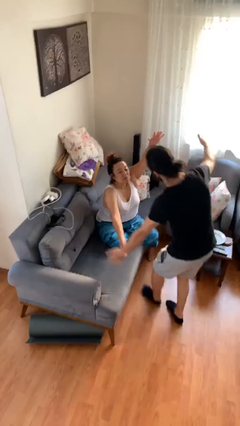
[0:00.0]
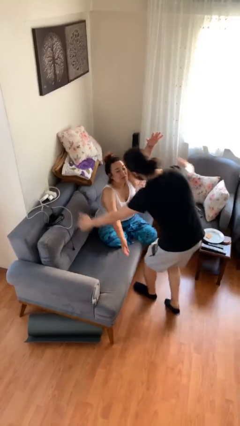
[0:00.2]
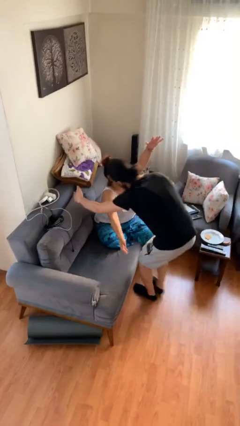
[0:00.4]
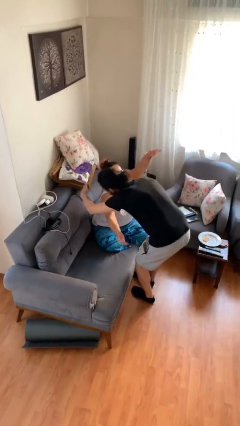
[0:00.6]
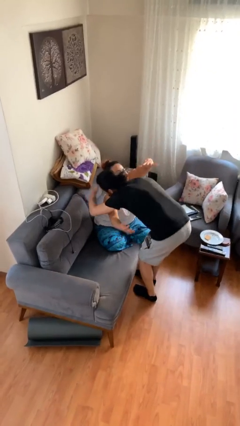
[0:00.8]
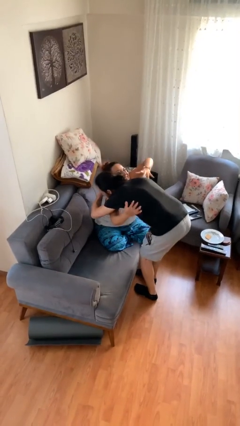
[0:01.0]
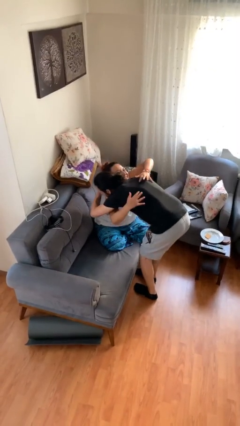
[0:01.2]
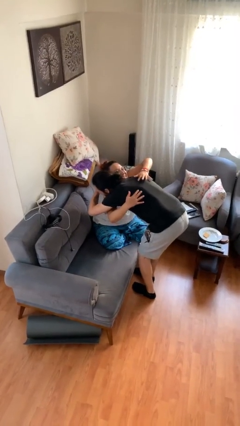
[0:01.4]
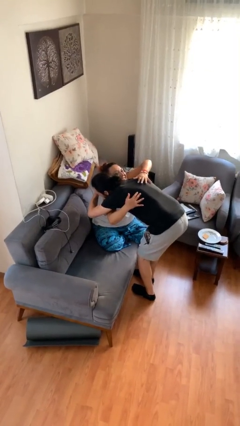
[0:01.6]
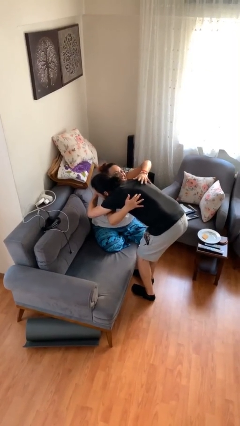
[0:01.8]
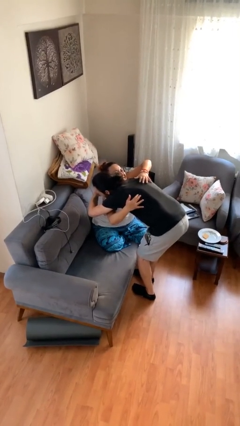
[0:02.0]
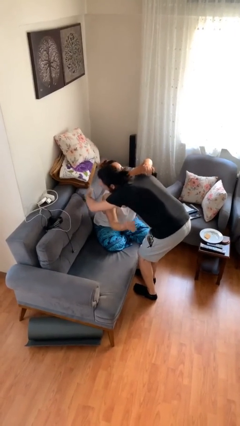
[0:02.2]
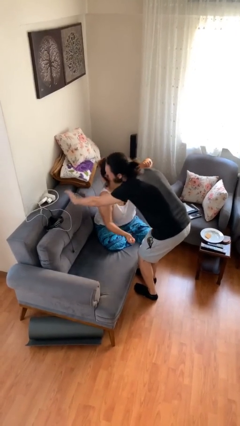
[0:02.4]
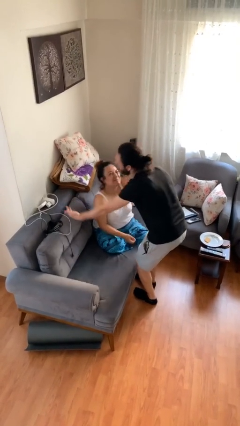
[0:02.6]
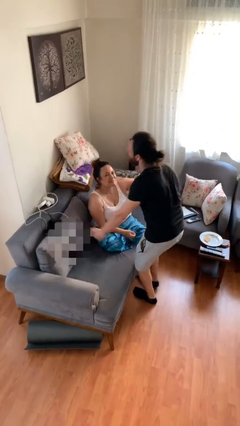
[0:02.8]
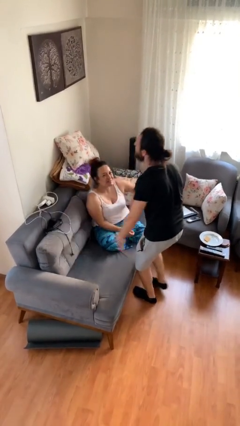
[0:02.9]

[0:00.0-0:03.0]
person embraces person

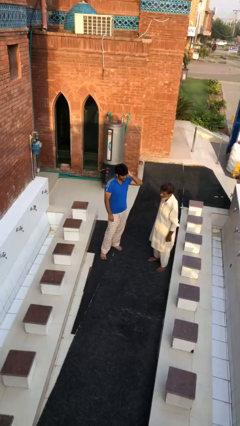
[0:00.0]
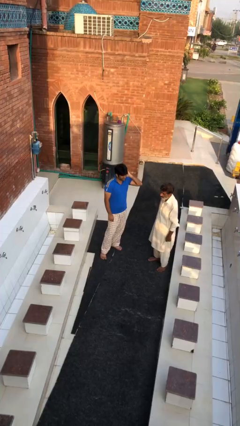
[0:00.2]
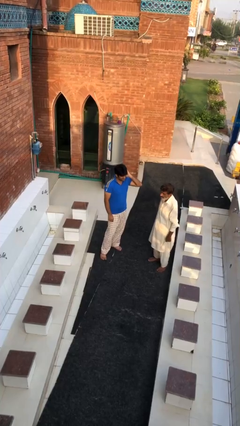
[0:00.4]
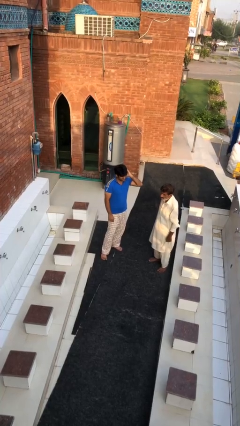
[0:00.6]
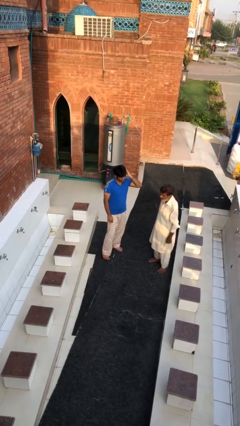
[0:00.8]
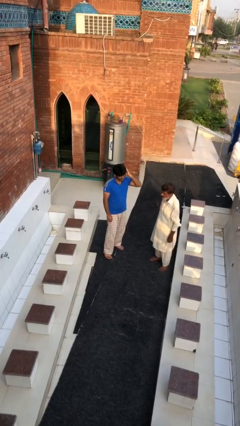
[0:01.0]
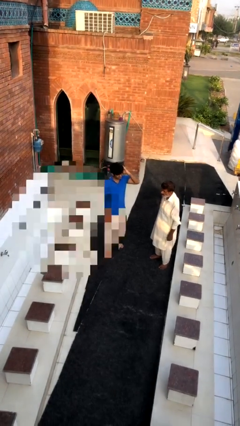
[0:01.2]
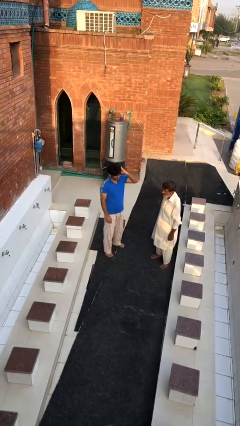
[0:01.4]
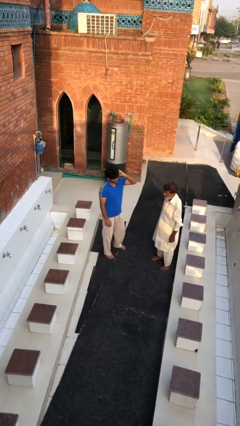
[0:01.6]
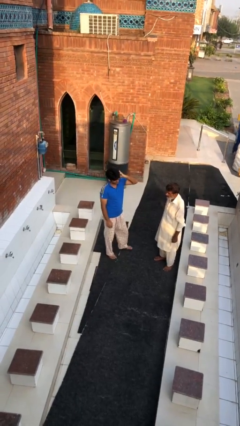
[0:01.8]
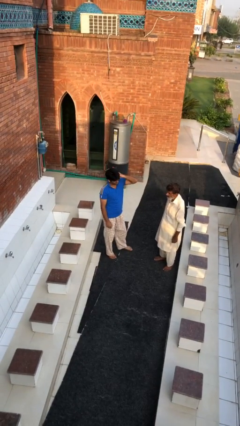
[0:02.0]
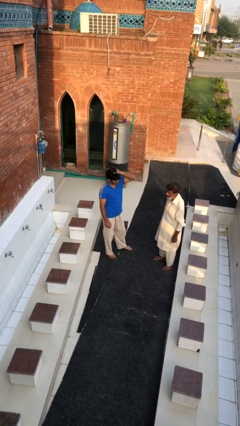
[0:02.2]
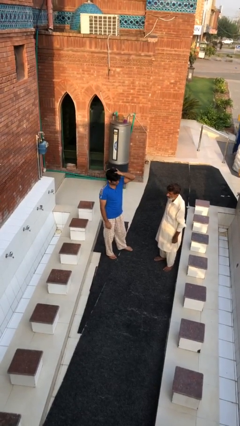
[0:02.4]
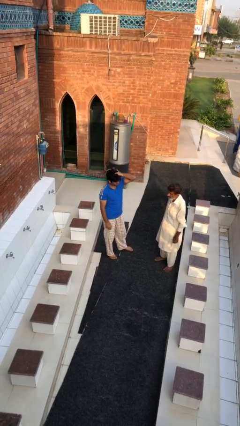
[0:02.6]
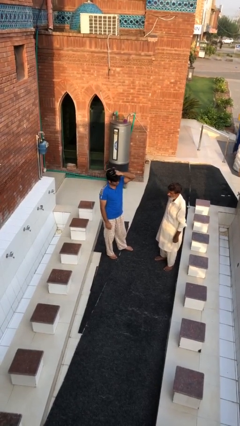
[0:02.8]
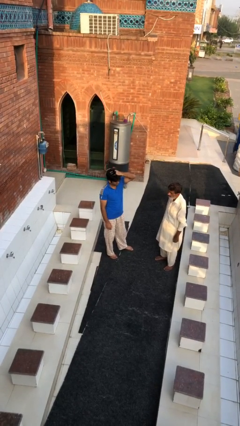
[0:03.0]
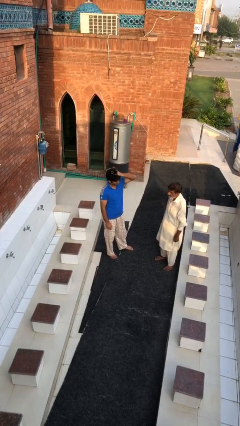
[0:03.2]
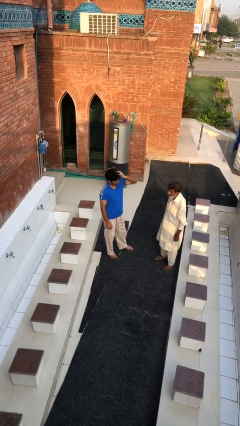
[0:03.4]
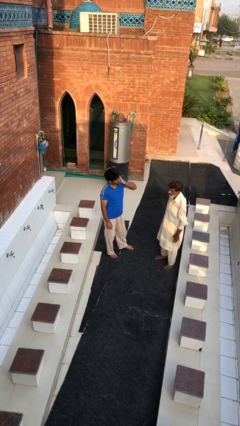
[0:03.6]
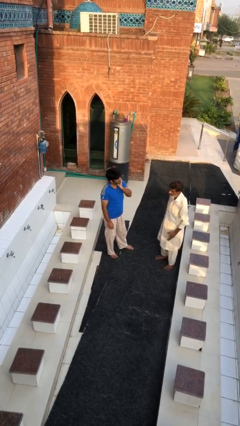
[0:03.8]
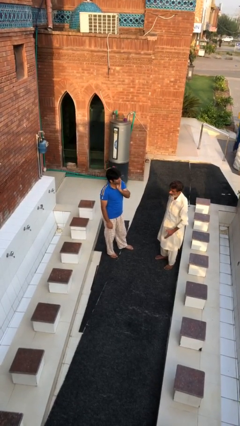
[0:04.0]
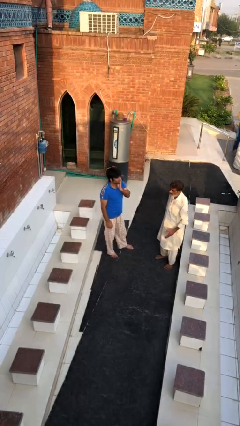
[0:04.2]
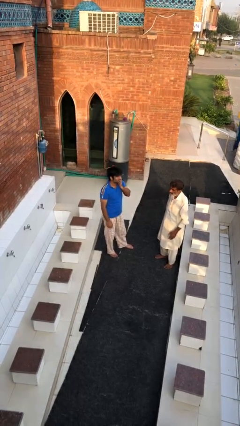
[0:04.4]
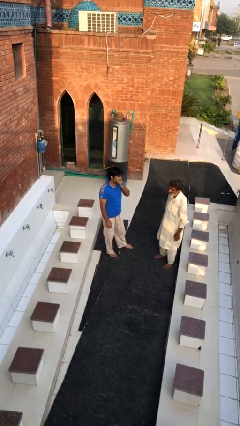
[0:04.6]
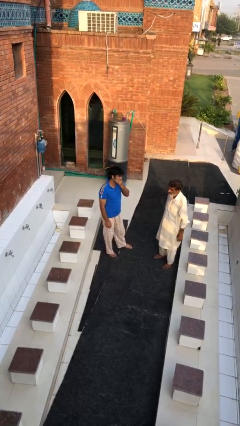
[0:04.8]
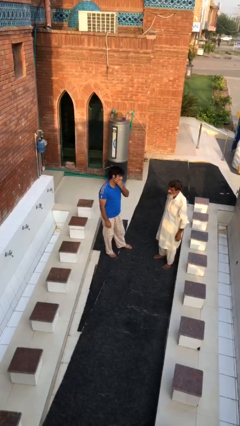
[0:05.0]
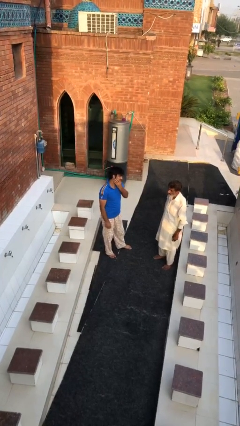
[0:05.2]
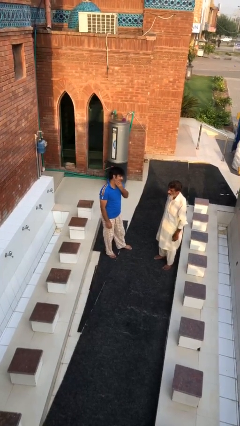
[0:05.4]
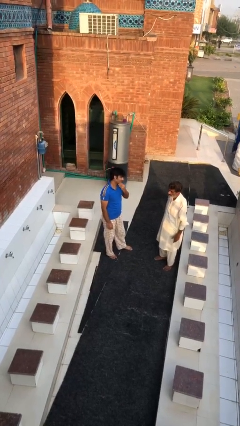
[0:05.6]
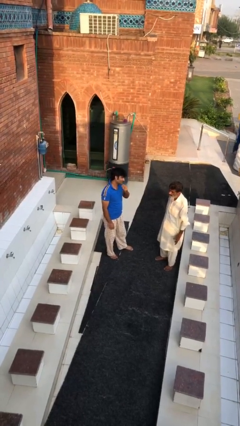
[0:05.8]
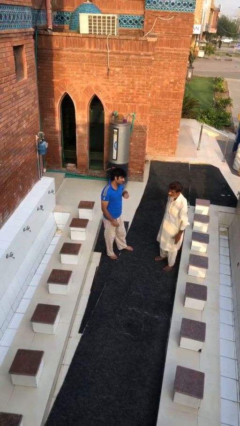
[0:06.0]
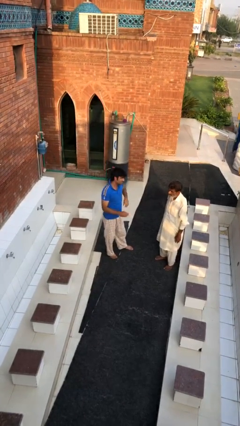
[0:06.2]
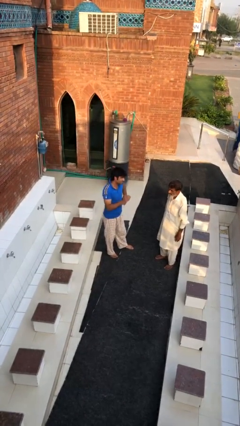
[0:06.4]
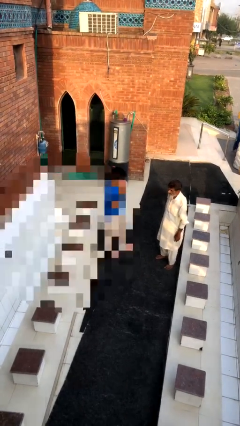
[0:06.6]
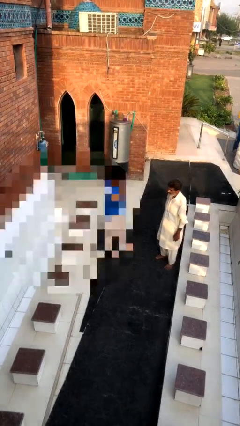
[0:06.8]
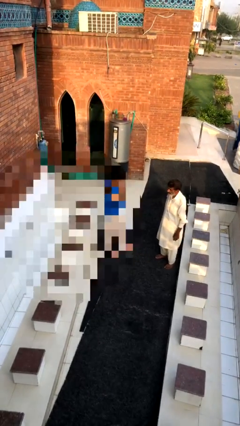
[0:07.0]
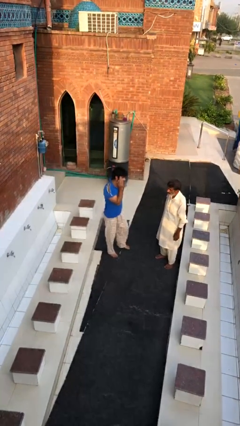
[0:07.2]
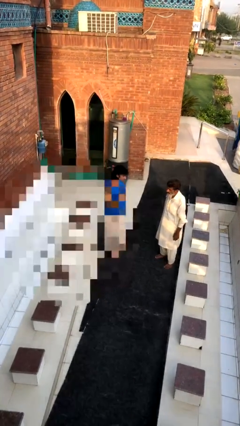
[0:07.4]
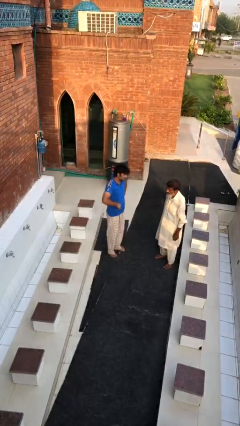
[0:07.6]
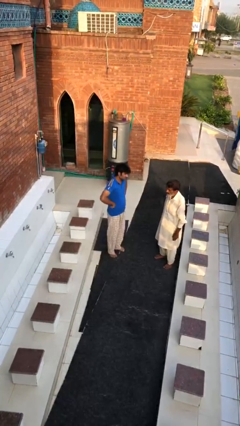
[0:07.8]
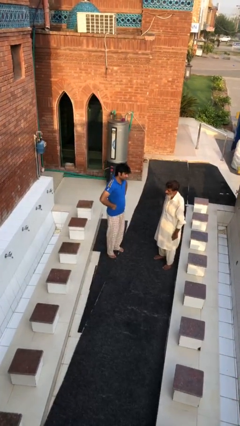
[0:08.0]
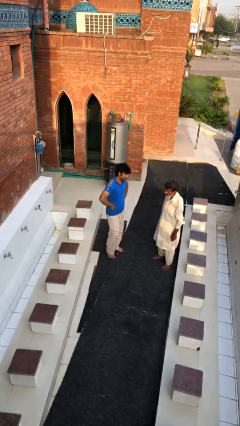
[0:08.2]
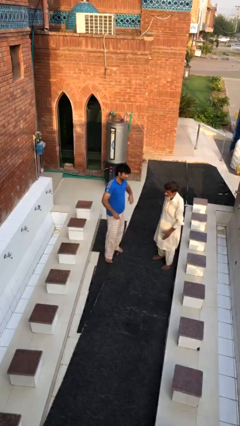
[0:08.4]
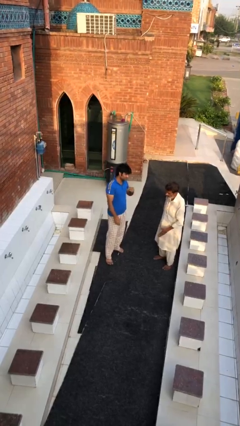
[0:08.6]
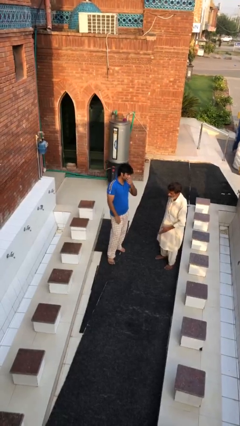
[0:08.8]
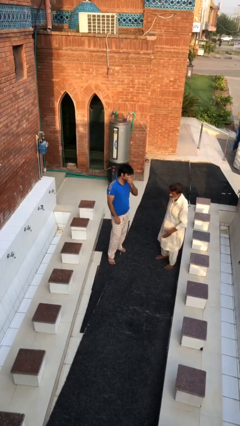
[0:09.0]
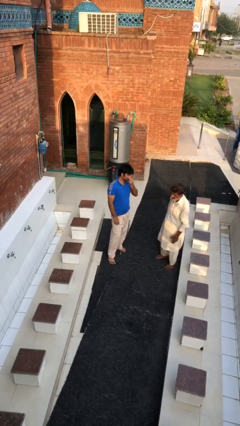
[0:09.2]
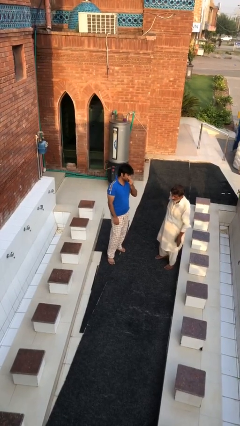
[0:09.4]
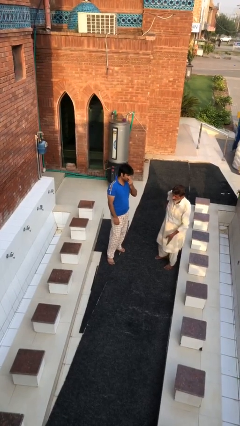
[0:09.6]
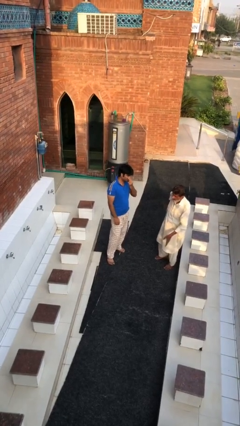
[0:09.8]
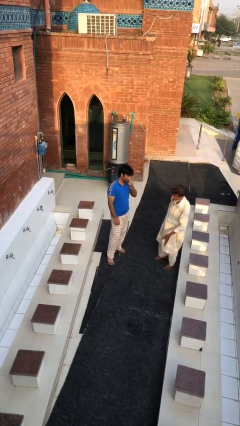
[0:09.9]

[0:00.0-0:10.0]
person talks to person

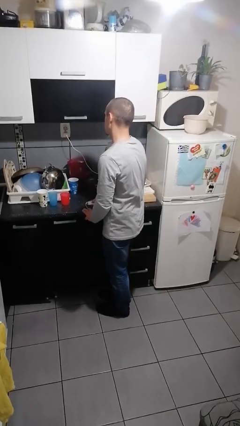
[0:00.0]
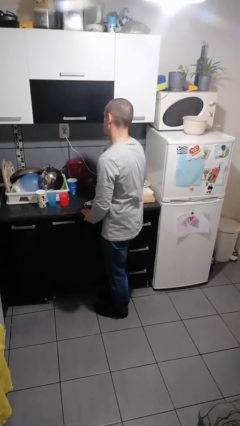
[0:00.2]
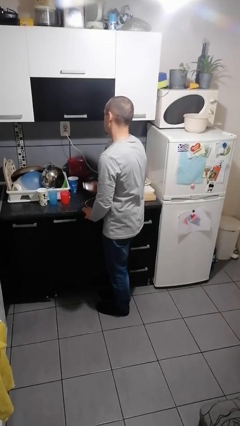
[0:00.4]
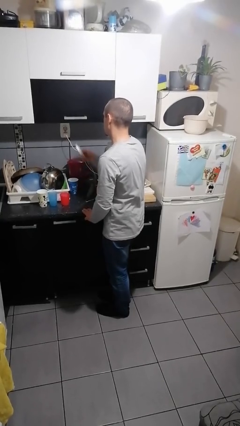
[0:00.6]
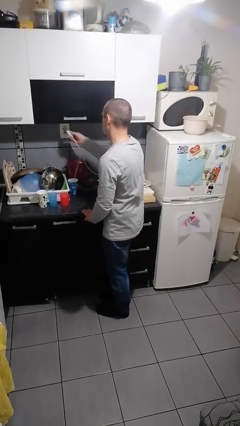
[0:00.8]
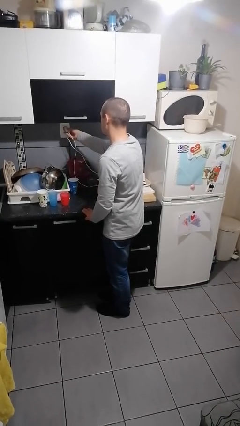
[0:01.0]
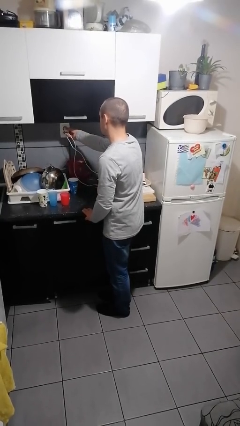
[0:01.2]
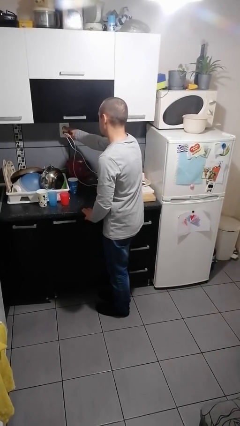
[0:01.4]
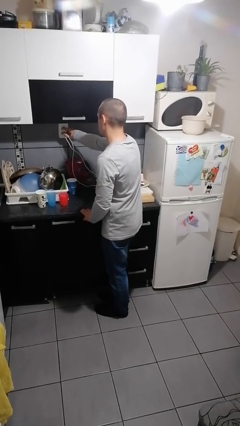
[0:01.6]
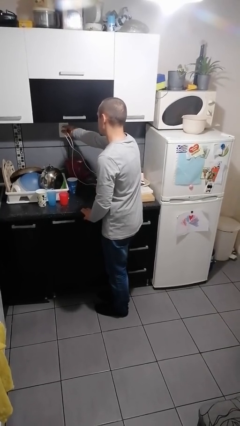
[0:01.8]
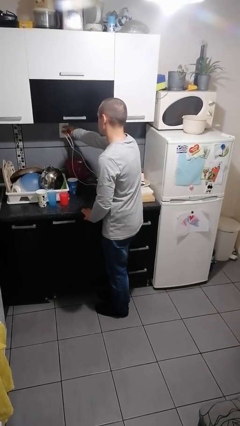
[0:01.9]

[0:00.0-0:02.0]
person plugs into electrical socket

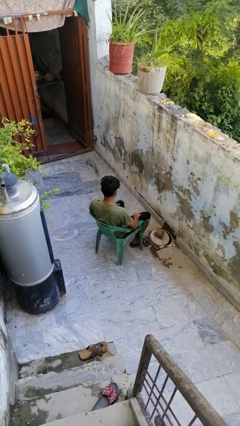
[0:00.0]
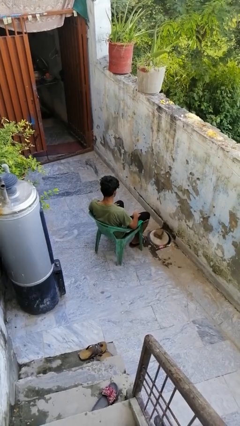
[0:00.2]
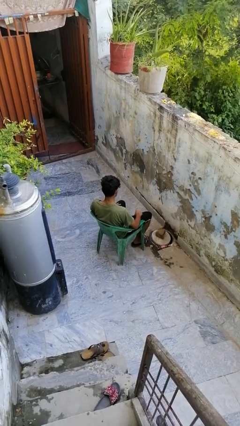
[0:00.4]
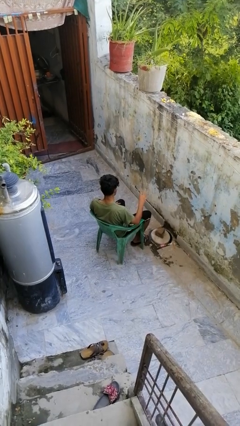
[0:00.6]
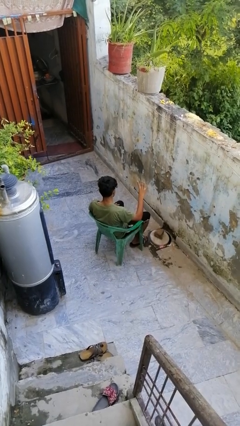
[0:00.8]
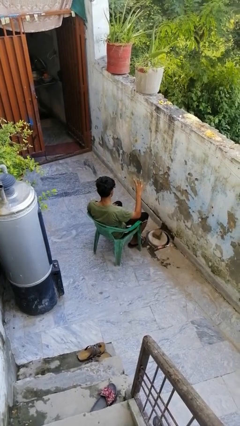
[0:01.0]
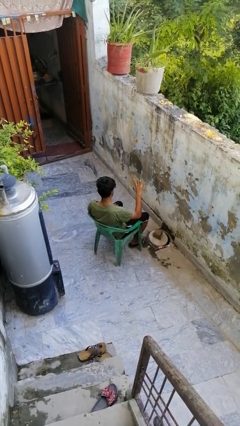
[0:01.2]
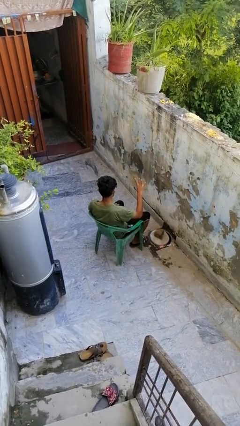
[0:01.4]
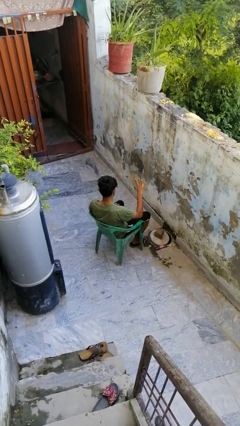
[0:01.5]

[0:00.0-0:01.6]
person gestures number four

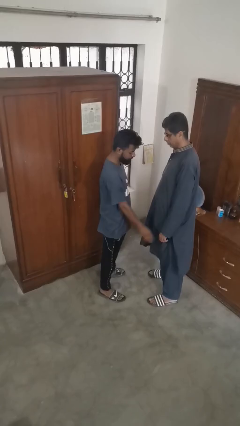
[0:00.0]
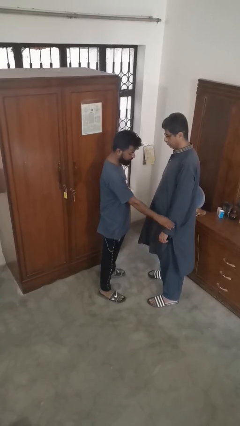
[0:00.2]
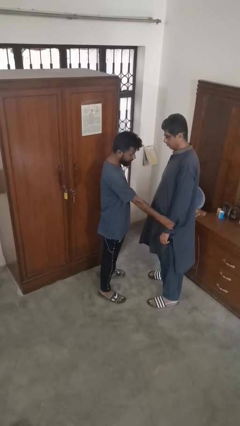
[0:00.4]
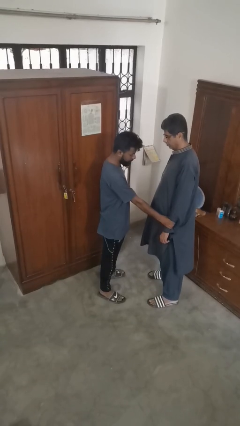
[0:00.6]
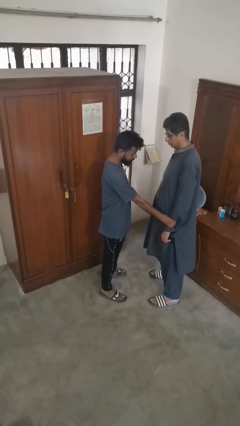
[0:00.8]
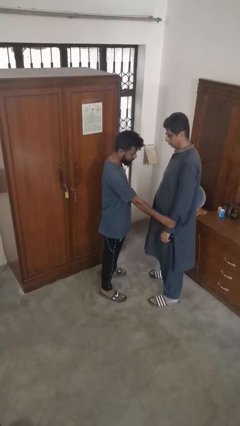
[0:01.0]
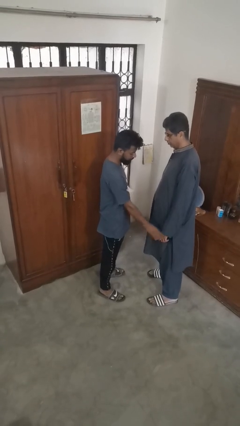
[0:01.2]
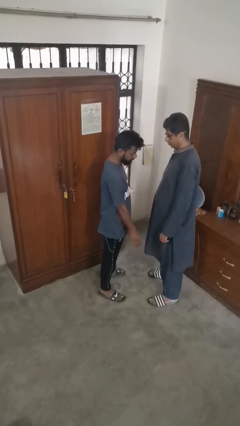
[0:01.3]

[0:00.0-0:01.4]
person grabs person by forearm
